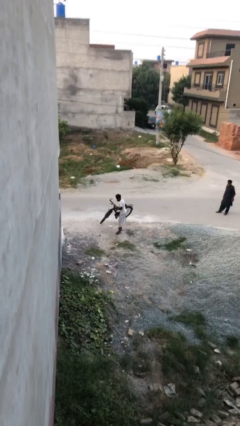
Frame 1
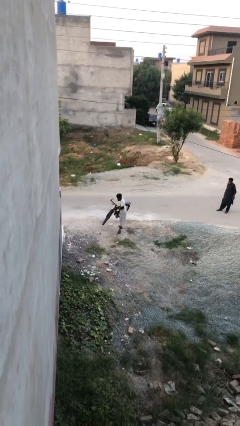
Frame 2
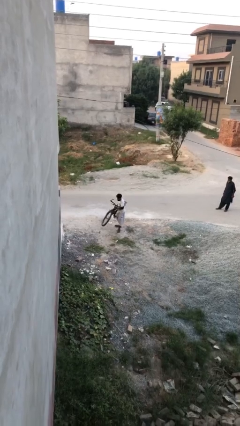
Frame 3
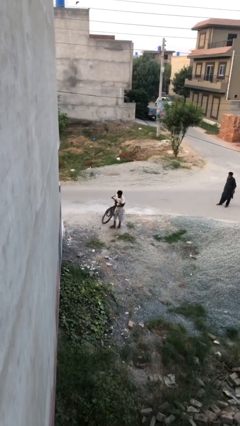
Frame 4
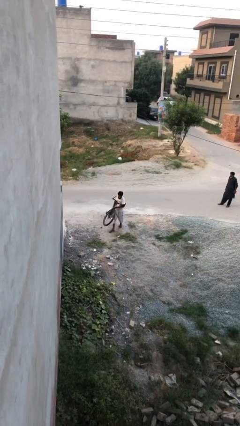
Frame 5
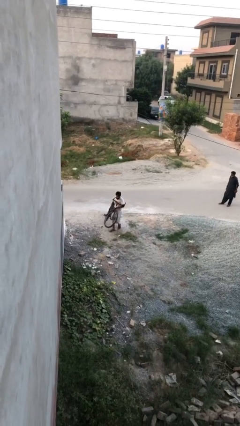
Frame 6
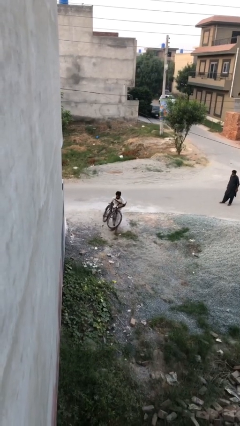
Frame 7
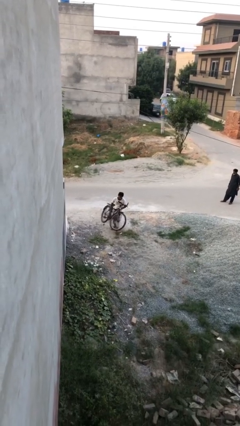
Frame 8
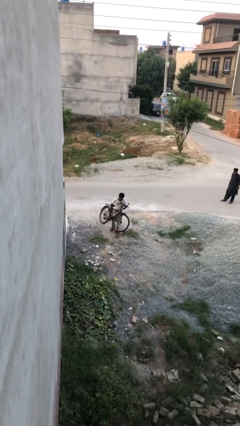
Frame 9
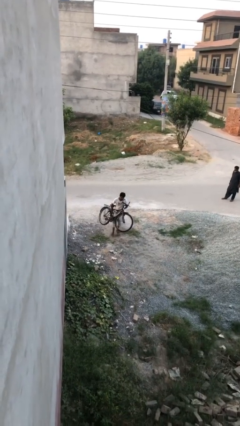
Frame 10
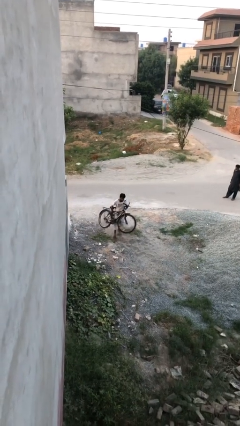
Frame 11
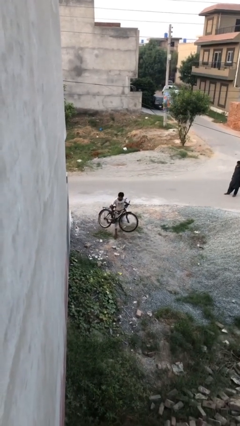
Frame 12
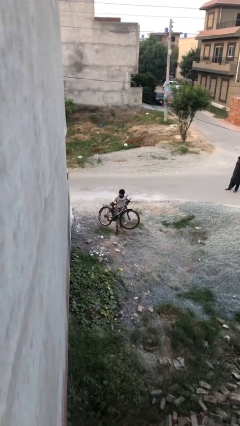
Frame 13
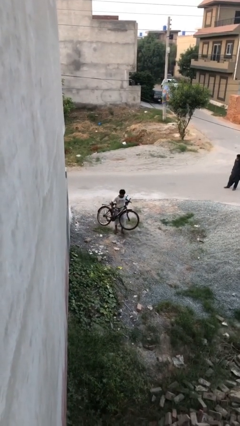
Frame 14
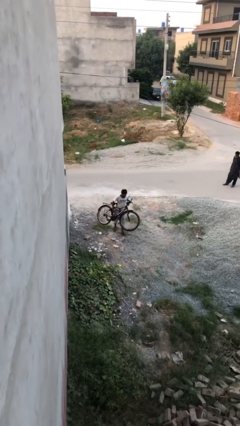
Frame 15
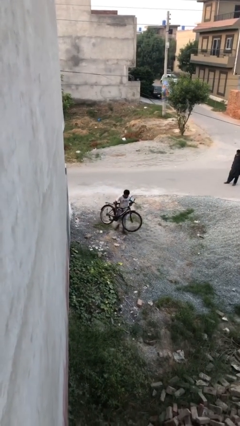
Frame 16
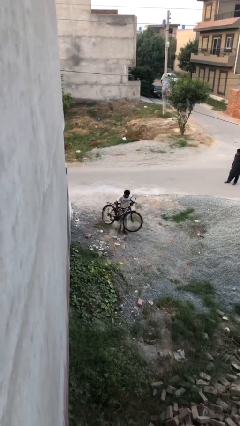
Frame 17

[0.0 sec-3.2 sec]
person carries heavy object

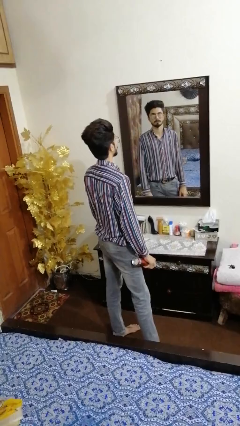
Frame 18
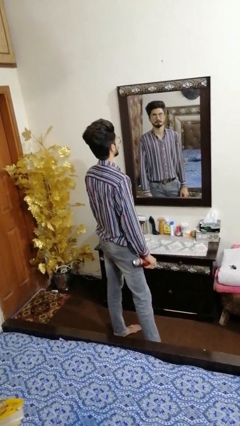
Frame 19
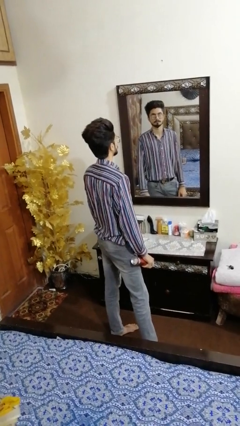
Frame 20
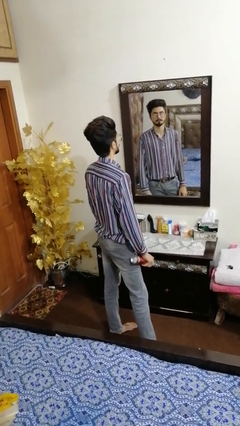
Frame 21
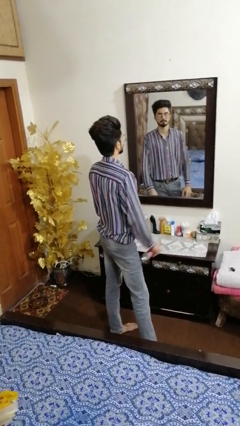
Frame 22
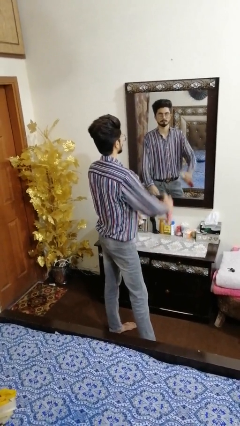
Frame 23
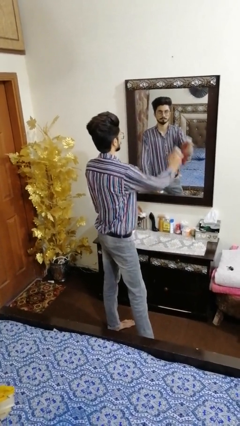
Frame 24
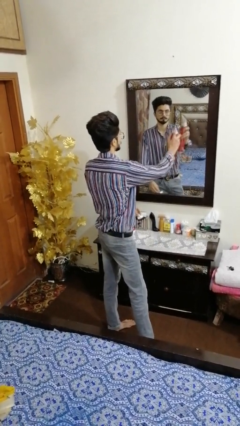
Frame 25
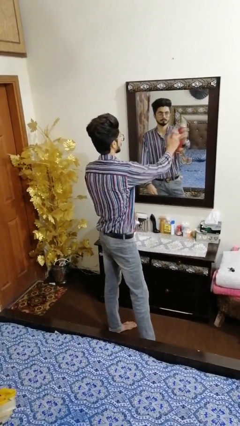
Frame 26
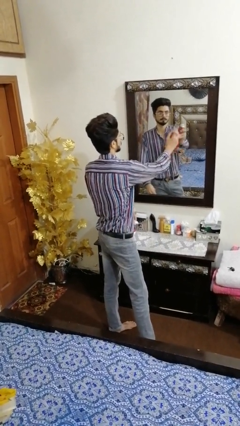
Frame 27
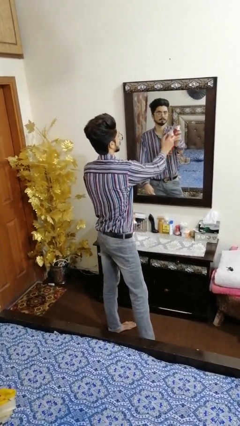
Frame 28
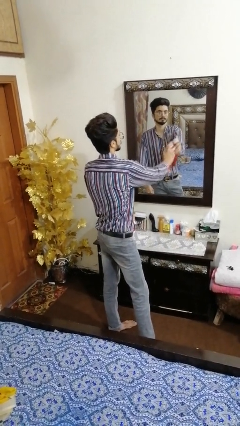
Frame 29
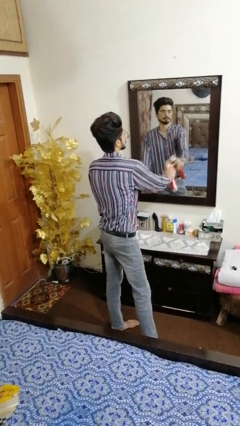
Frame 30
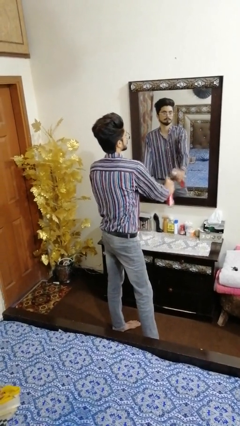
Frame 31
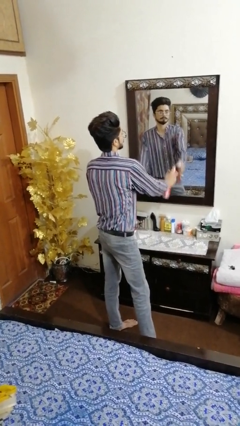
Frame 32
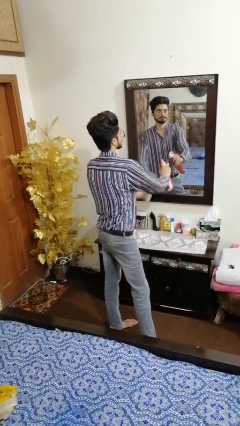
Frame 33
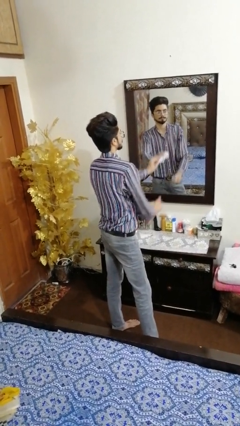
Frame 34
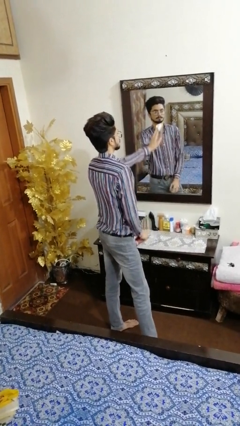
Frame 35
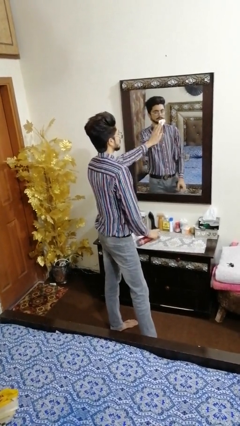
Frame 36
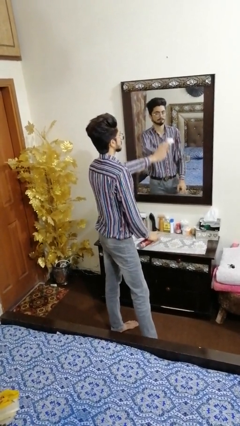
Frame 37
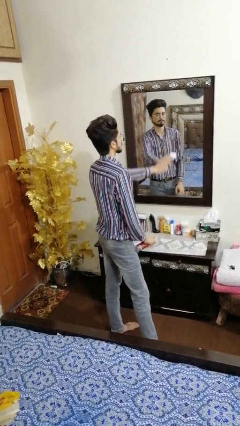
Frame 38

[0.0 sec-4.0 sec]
person sprays from bottle

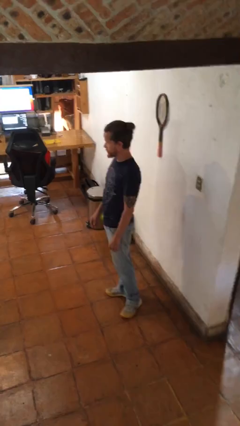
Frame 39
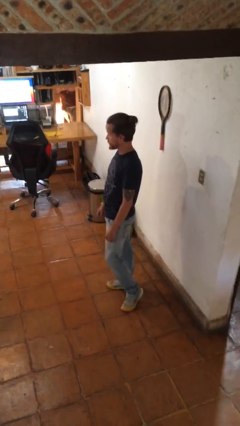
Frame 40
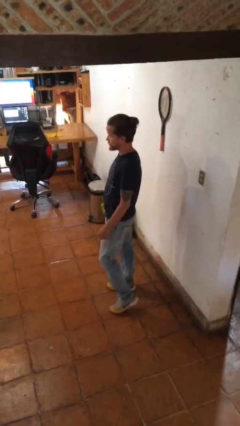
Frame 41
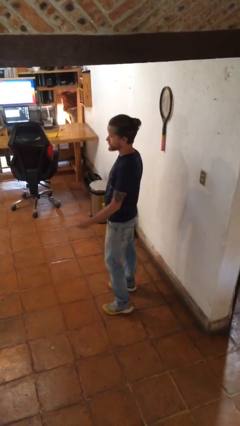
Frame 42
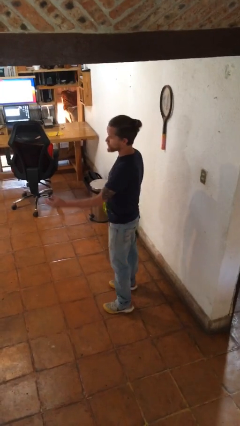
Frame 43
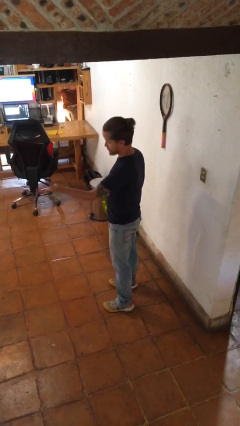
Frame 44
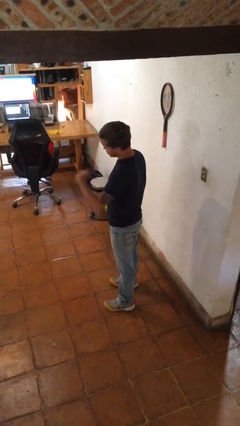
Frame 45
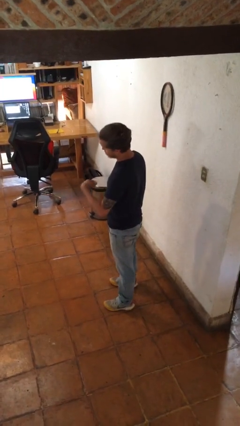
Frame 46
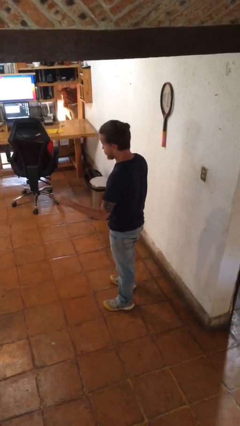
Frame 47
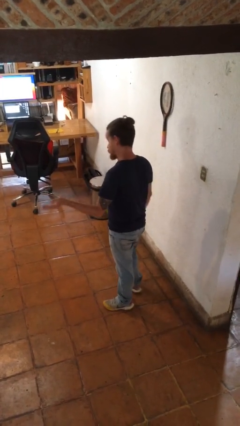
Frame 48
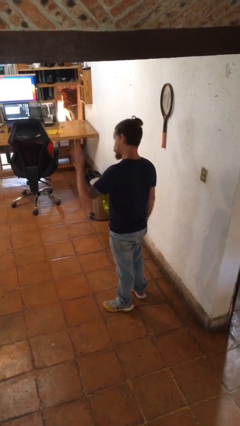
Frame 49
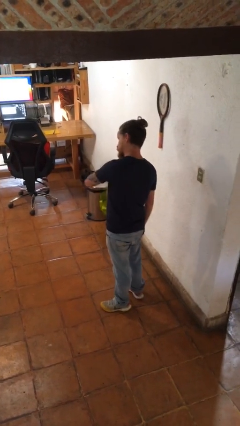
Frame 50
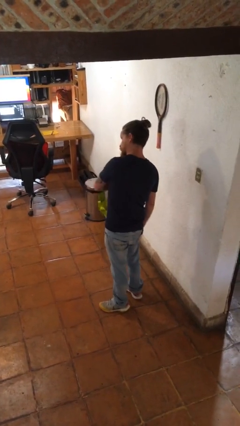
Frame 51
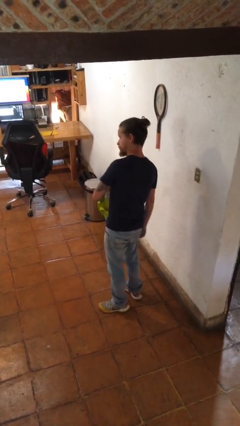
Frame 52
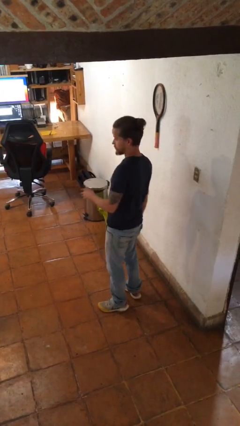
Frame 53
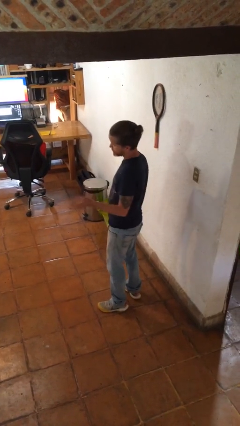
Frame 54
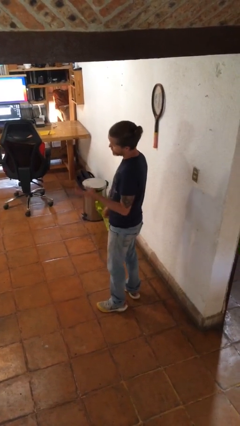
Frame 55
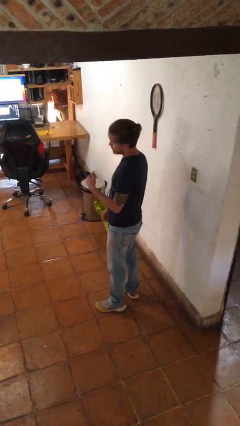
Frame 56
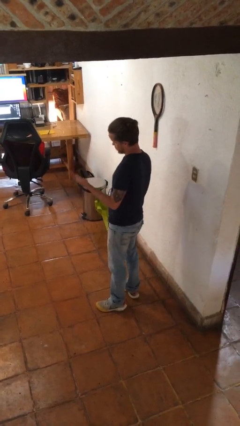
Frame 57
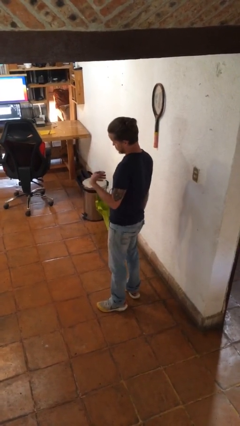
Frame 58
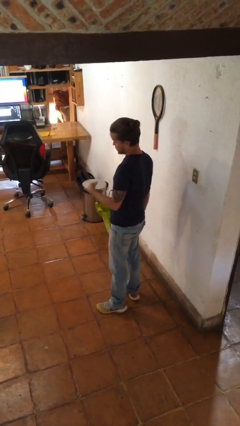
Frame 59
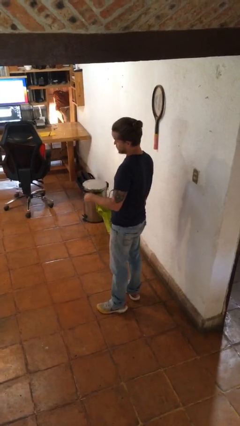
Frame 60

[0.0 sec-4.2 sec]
person gestures come here

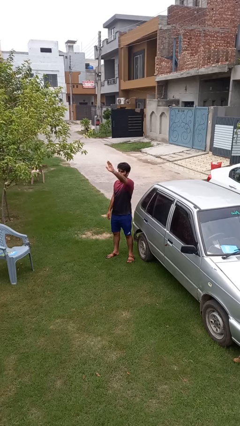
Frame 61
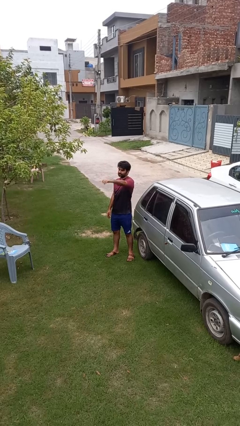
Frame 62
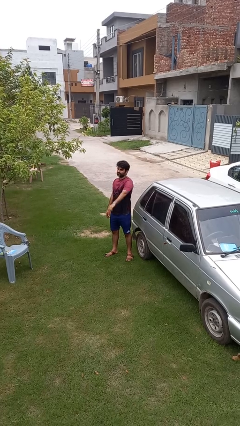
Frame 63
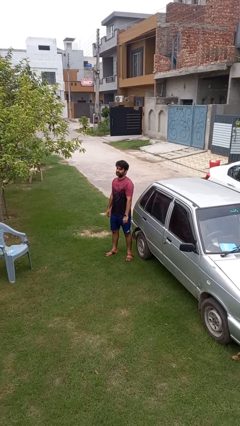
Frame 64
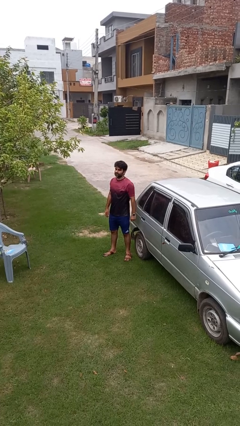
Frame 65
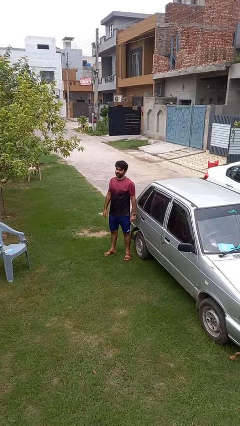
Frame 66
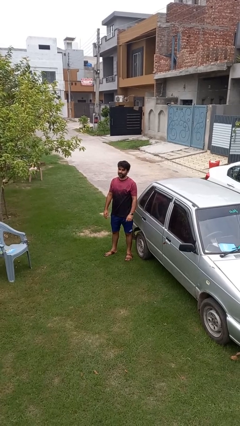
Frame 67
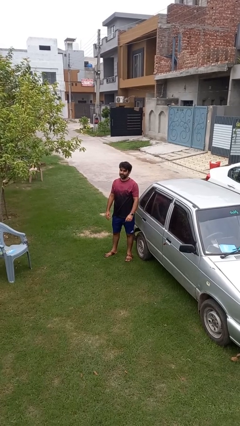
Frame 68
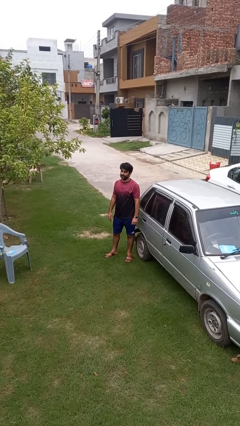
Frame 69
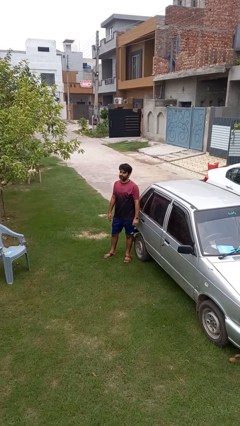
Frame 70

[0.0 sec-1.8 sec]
person gestures lower hand

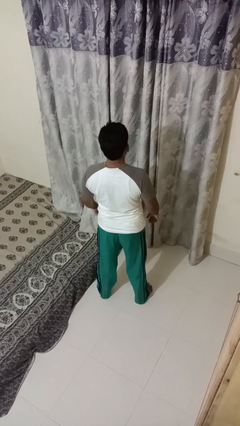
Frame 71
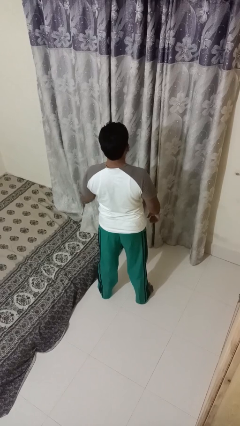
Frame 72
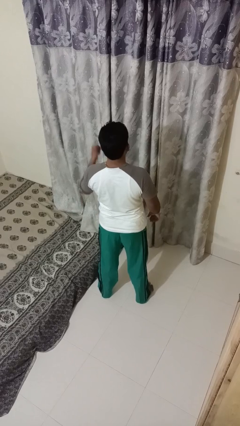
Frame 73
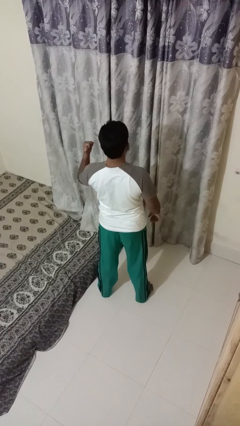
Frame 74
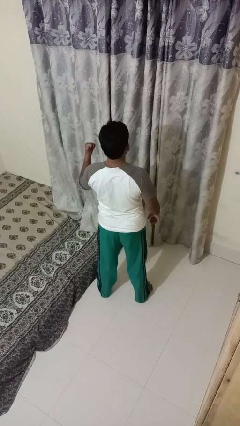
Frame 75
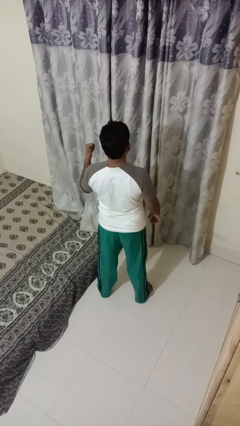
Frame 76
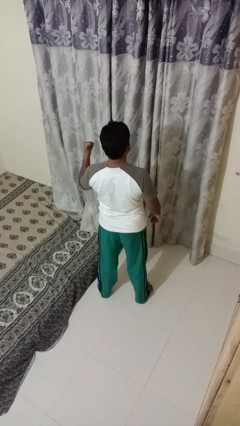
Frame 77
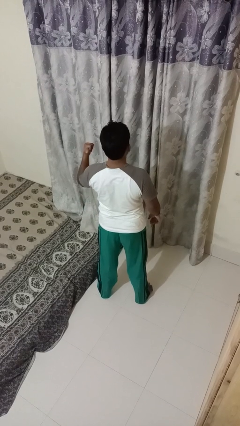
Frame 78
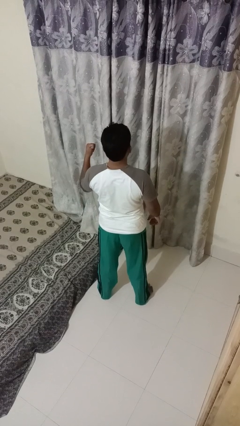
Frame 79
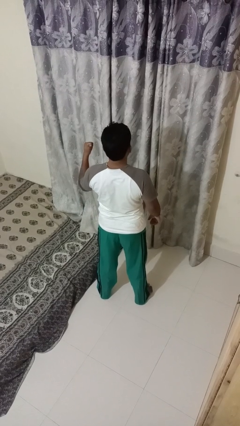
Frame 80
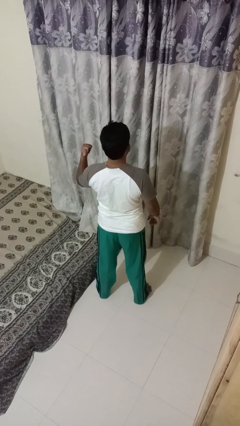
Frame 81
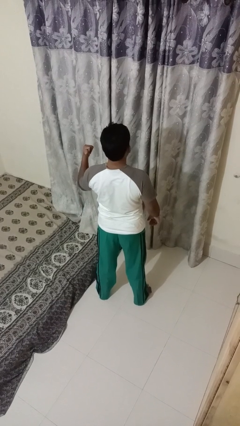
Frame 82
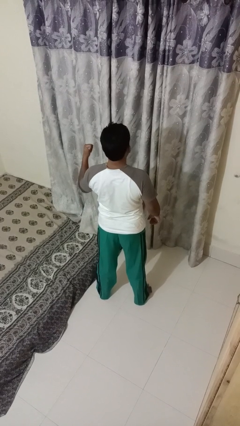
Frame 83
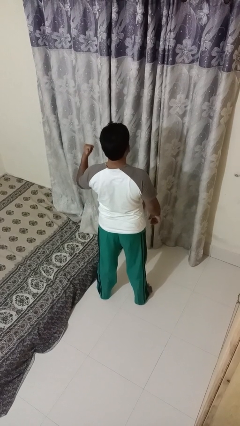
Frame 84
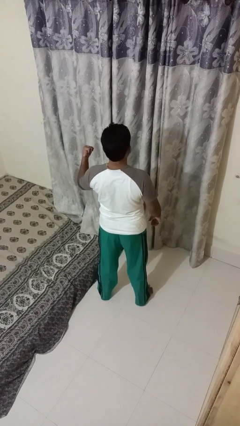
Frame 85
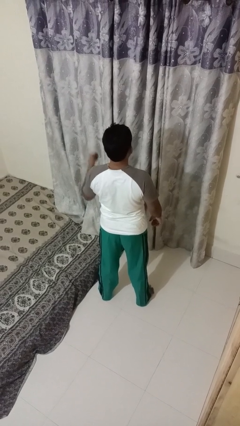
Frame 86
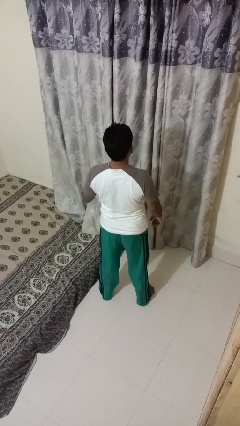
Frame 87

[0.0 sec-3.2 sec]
person gestures behind me

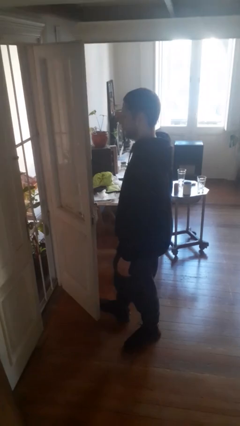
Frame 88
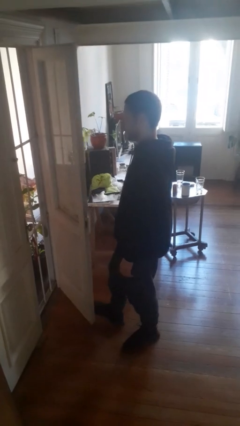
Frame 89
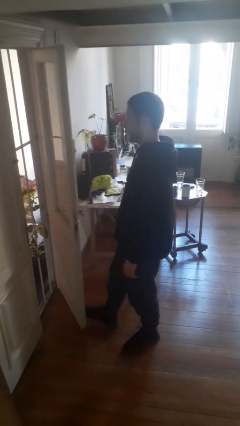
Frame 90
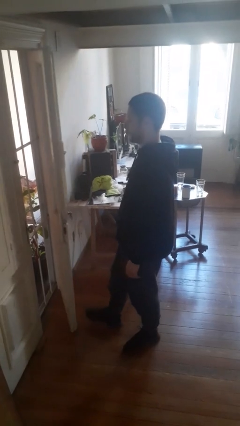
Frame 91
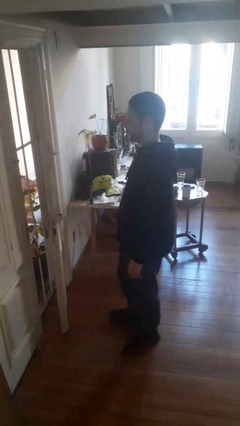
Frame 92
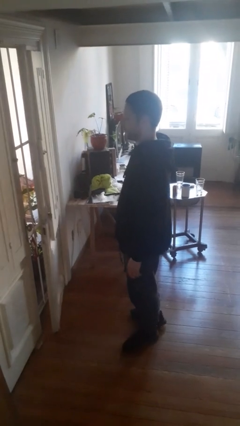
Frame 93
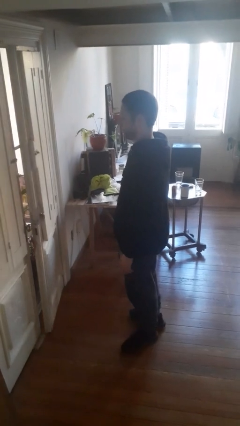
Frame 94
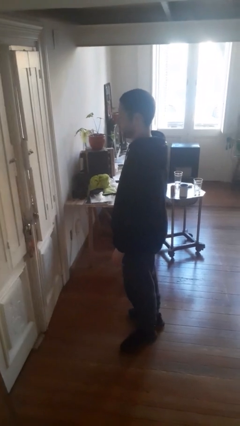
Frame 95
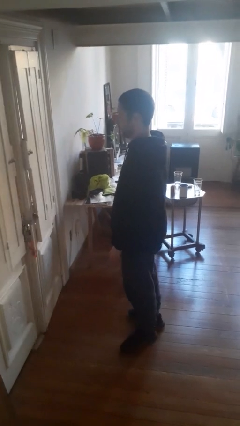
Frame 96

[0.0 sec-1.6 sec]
person closes door with foot
